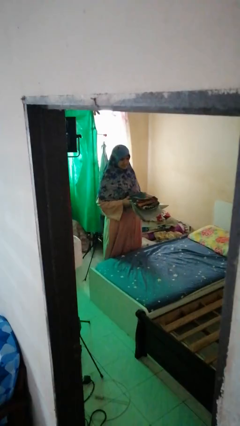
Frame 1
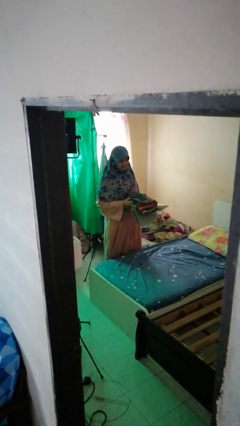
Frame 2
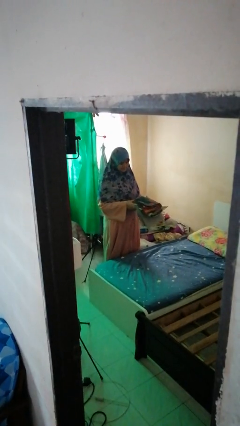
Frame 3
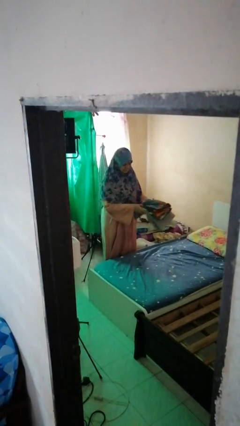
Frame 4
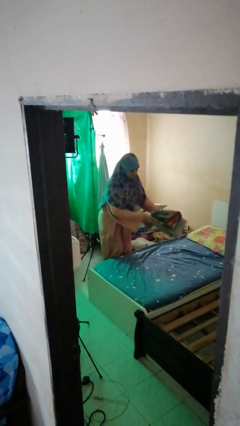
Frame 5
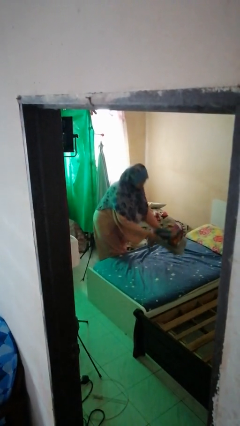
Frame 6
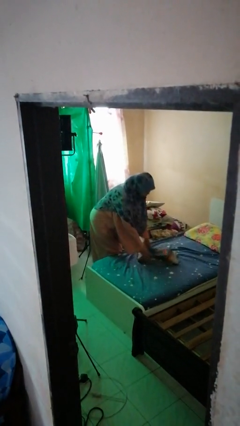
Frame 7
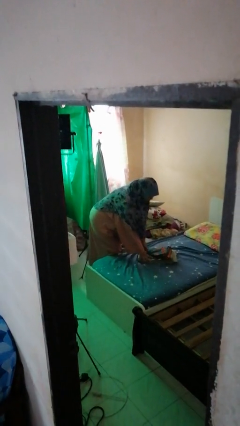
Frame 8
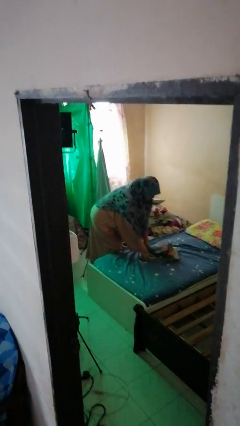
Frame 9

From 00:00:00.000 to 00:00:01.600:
person puts down object on bed

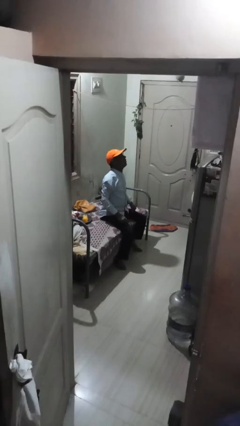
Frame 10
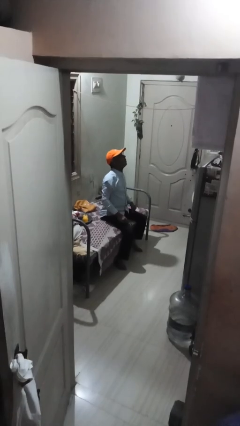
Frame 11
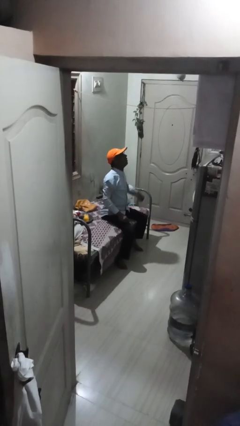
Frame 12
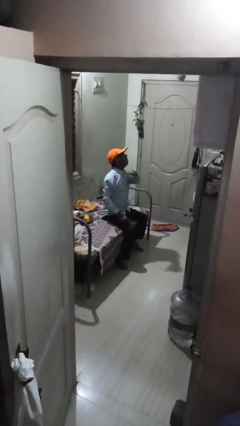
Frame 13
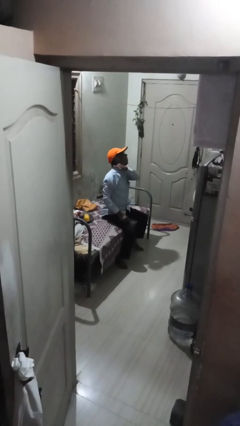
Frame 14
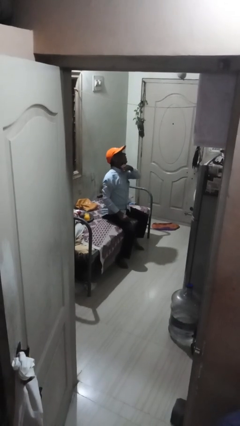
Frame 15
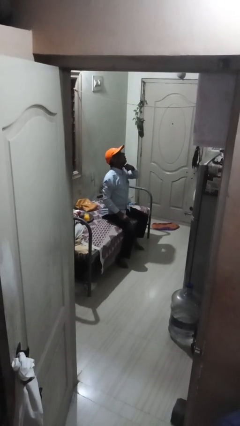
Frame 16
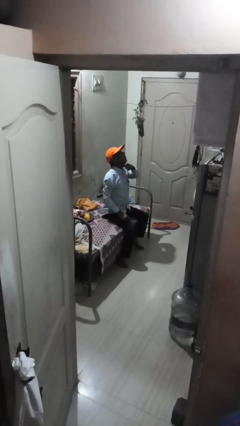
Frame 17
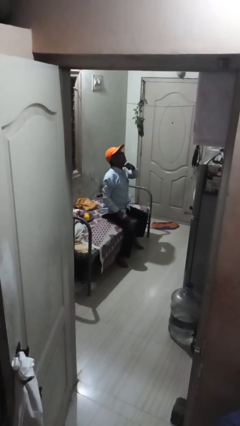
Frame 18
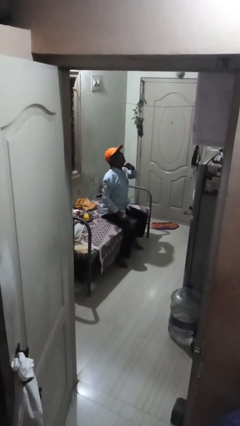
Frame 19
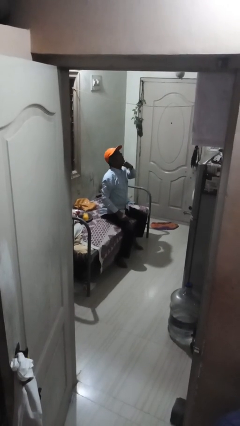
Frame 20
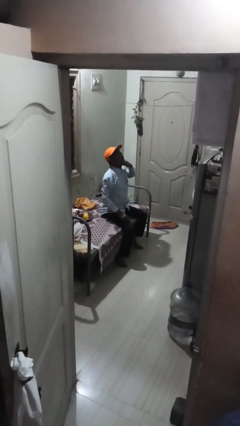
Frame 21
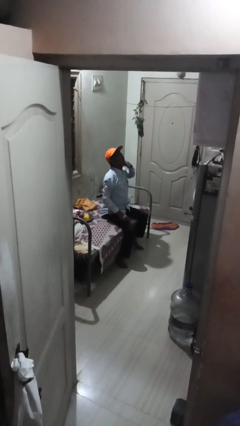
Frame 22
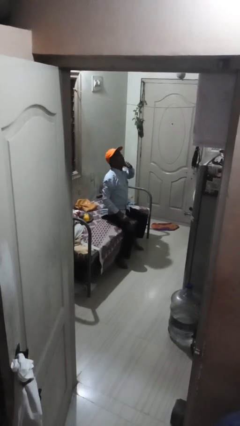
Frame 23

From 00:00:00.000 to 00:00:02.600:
person gestures cut

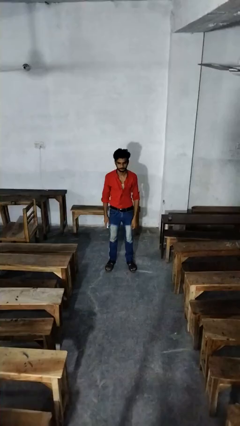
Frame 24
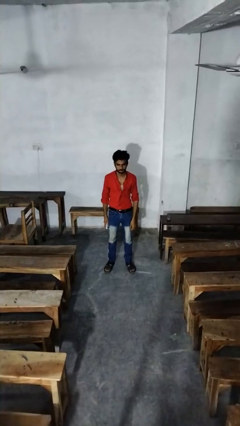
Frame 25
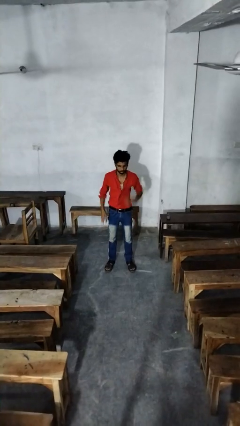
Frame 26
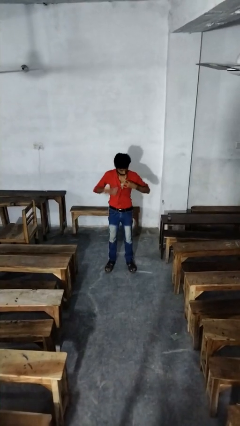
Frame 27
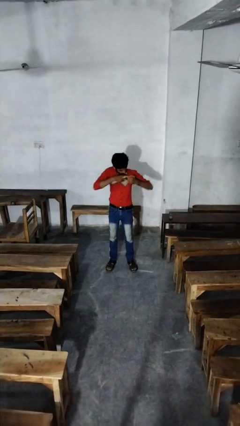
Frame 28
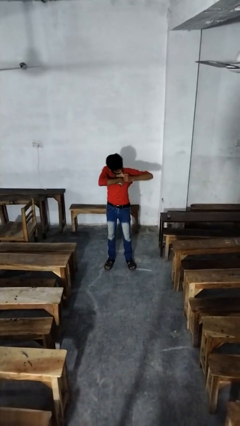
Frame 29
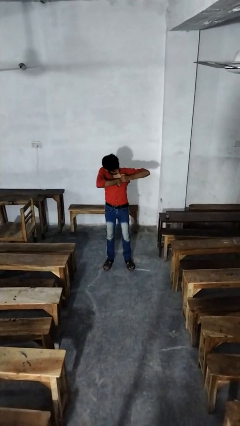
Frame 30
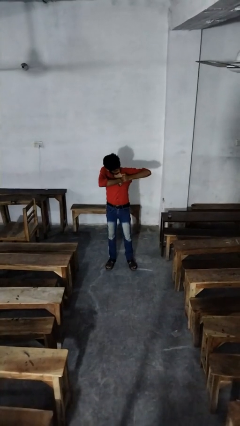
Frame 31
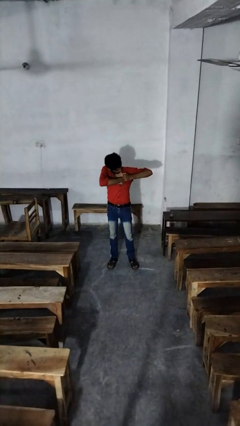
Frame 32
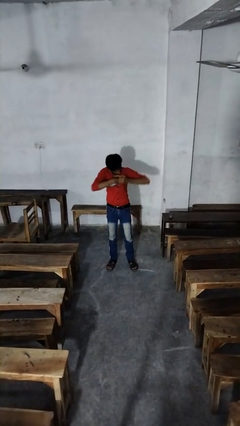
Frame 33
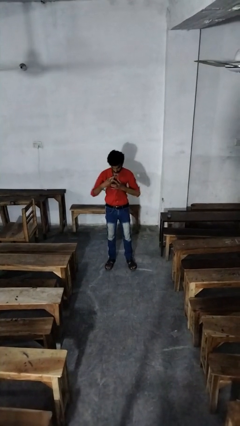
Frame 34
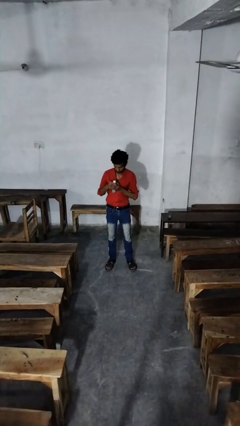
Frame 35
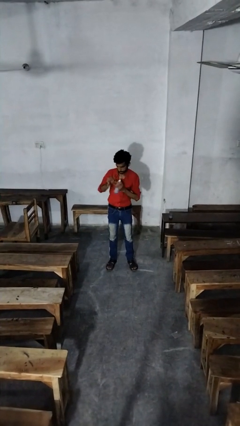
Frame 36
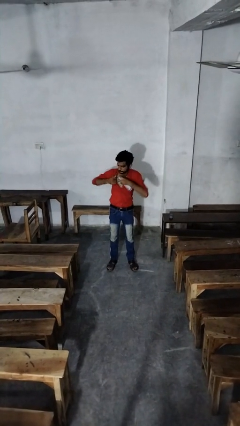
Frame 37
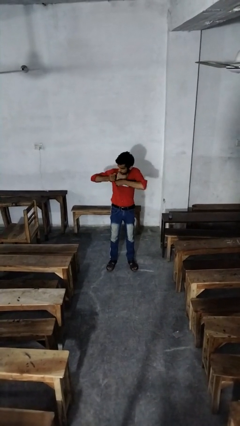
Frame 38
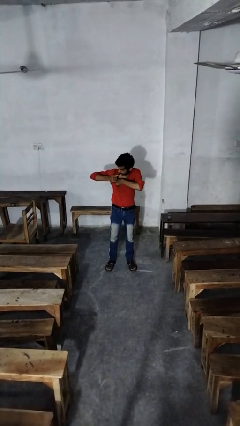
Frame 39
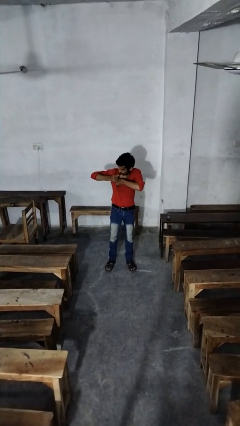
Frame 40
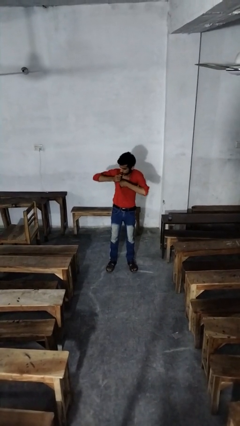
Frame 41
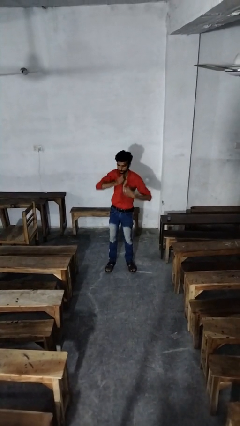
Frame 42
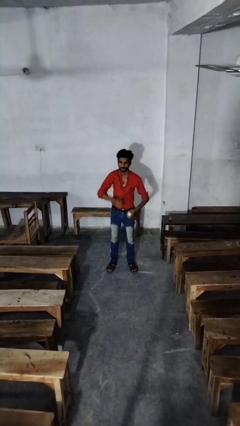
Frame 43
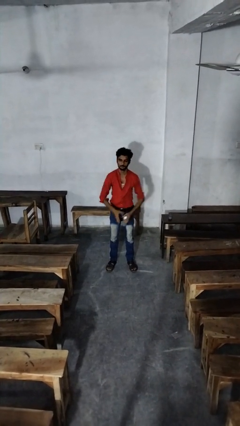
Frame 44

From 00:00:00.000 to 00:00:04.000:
person applies deodorant

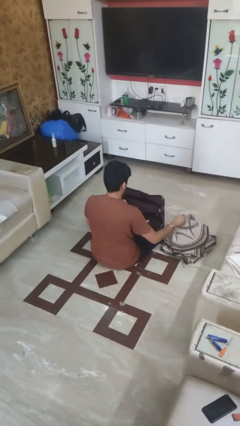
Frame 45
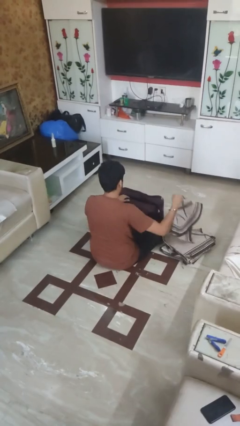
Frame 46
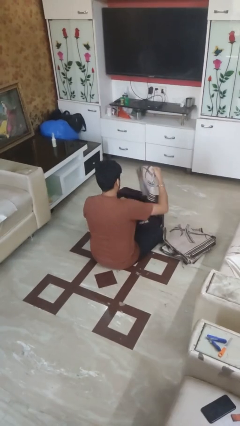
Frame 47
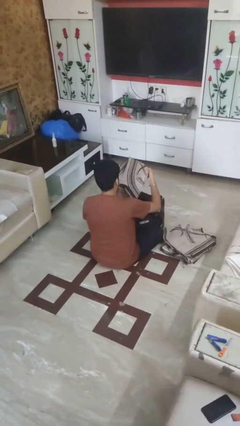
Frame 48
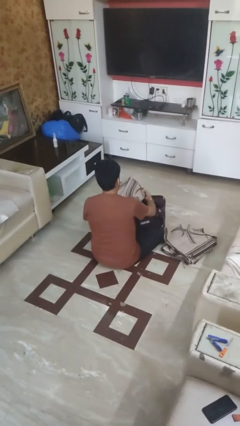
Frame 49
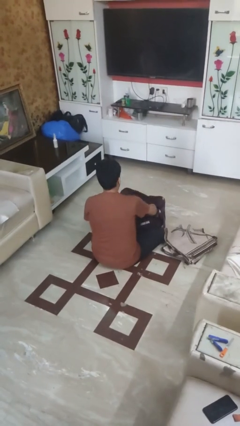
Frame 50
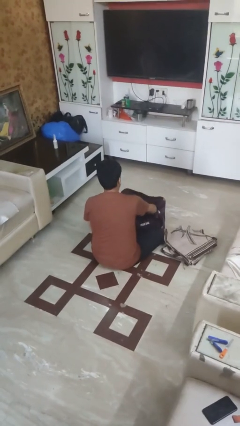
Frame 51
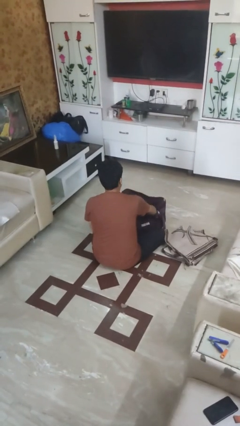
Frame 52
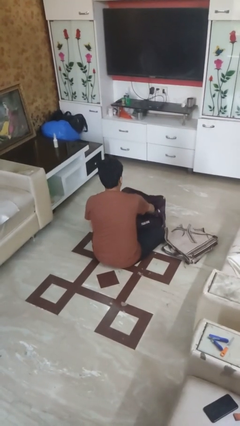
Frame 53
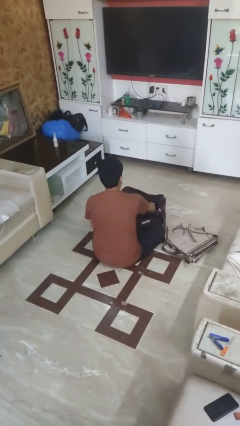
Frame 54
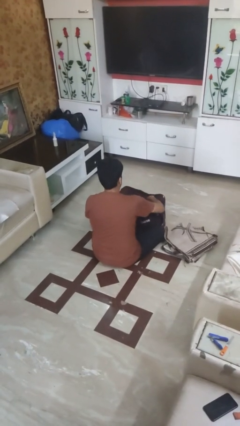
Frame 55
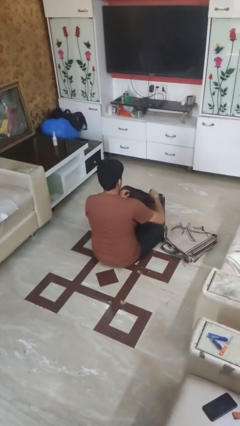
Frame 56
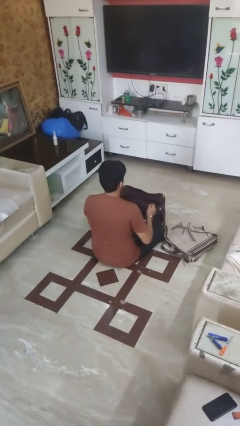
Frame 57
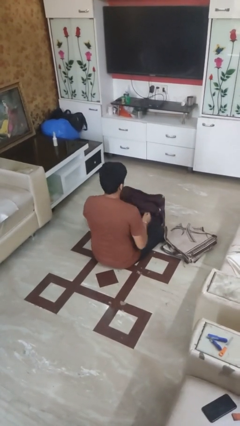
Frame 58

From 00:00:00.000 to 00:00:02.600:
person loads clothes into suitcase

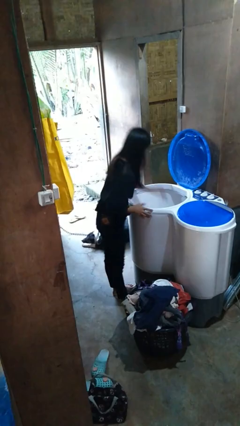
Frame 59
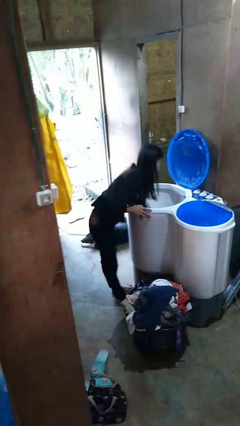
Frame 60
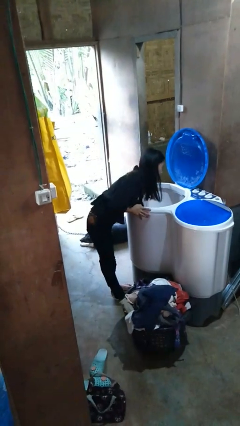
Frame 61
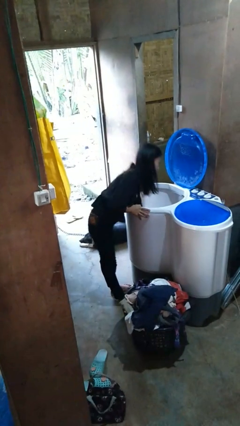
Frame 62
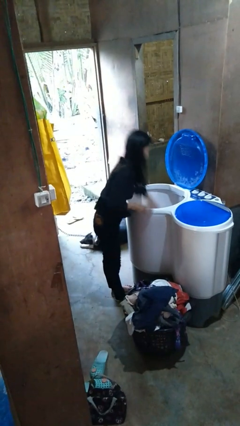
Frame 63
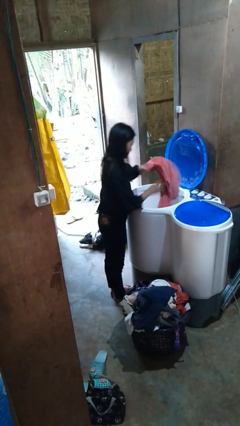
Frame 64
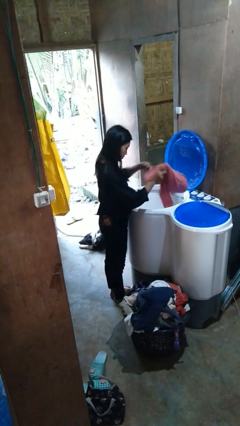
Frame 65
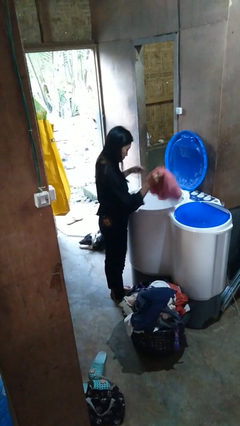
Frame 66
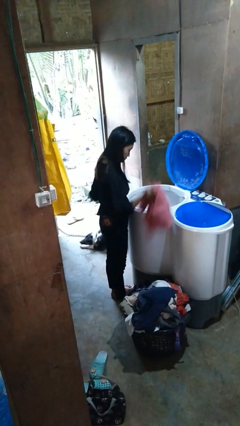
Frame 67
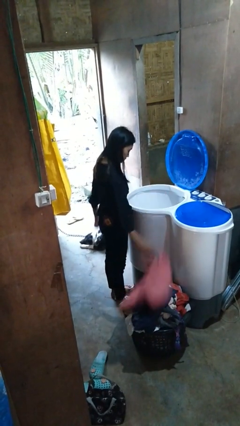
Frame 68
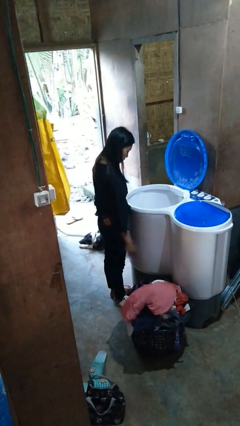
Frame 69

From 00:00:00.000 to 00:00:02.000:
person unloads clotheswasher

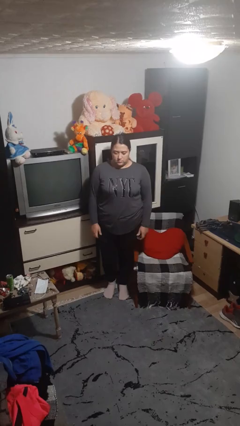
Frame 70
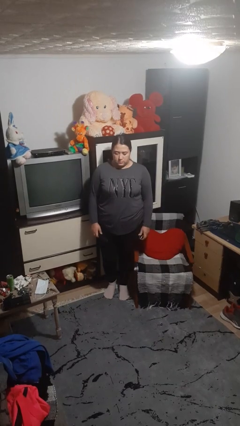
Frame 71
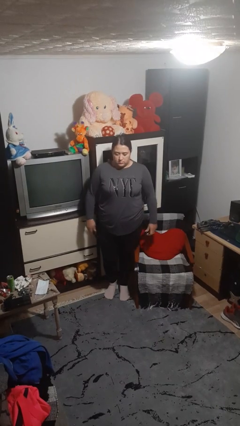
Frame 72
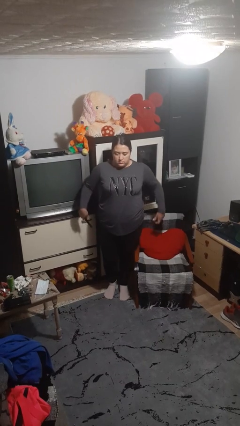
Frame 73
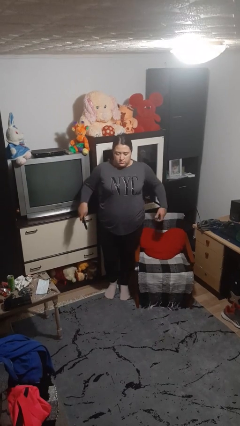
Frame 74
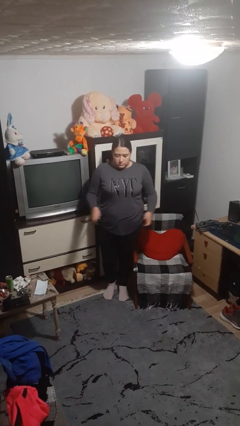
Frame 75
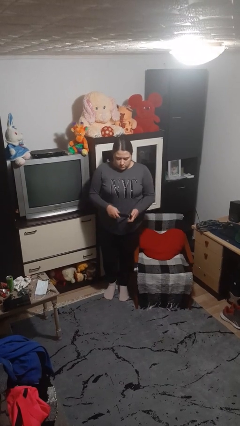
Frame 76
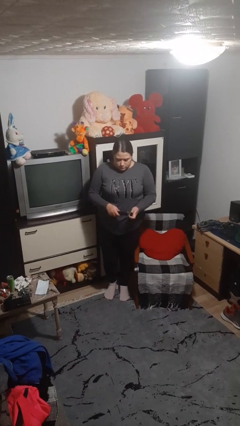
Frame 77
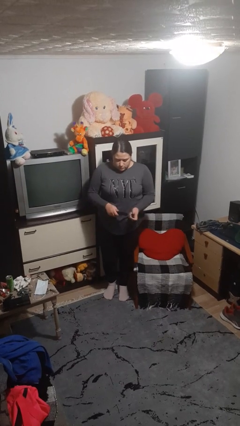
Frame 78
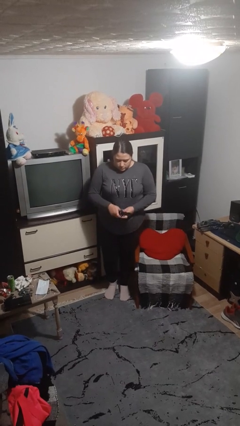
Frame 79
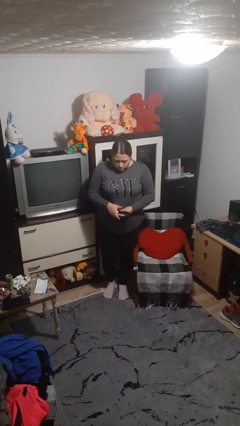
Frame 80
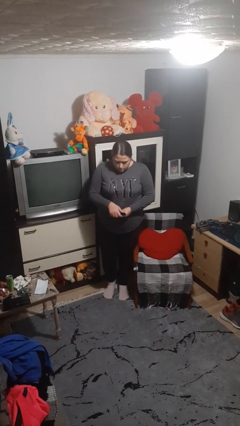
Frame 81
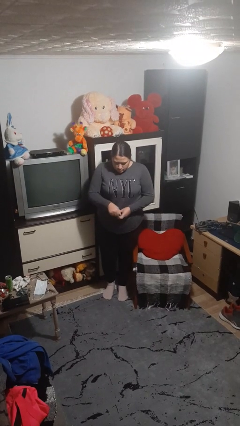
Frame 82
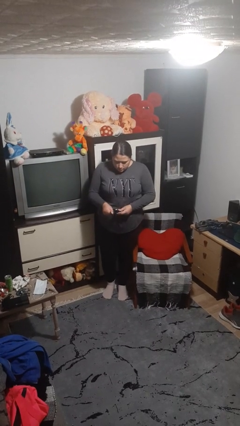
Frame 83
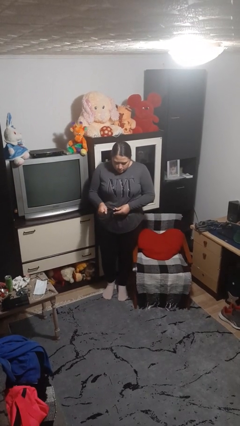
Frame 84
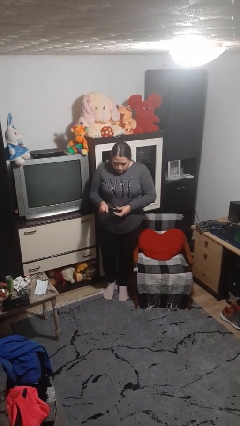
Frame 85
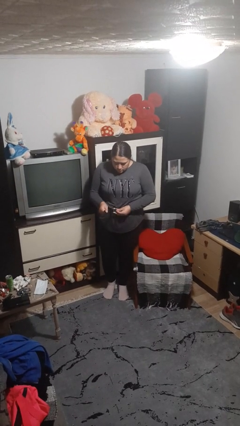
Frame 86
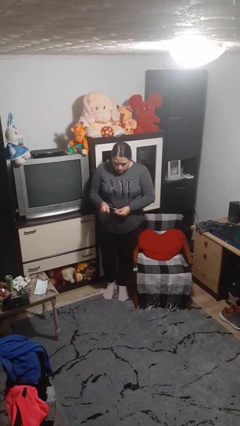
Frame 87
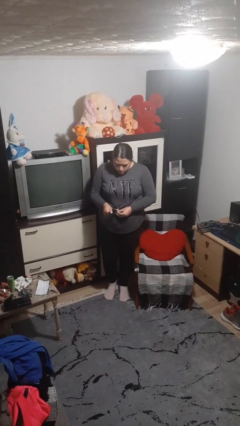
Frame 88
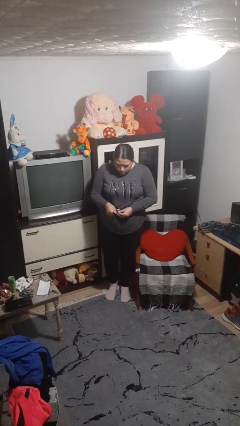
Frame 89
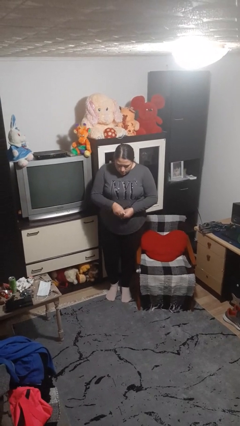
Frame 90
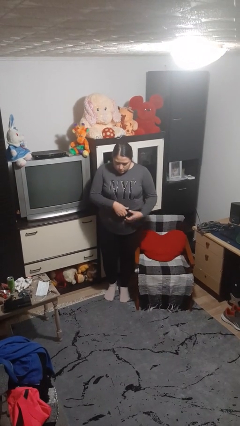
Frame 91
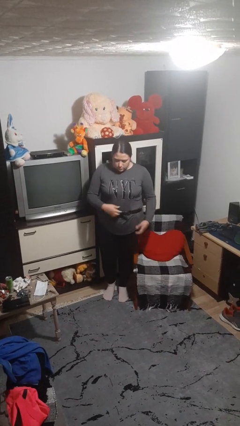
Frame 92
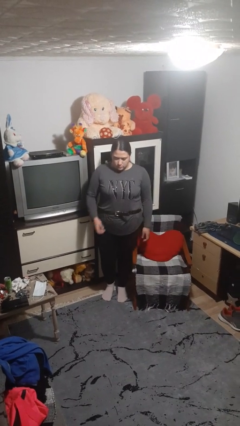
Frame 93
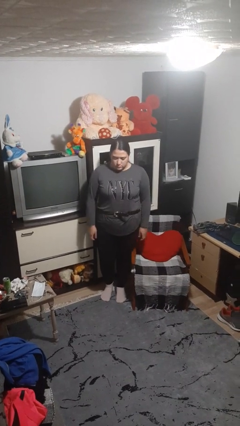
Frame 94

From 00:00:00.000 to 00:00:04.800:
person puts on belt
